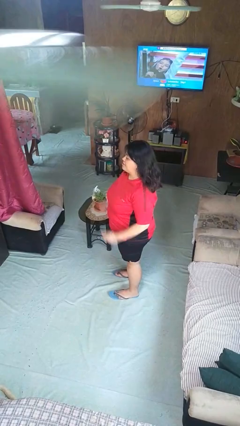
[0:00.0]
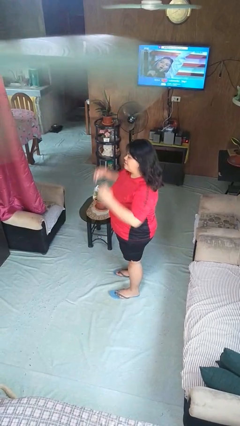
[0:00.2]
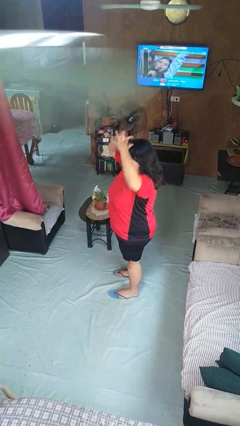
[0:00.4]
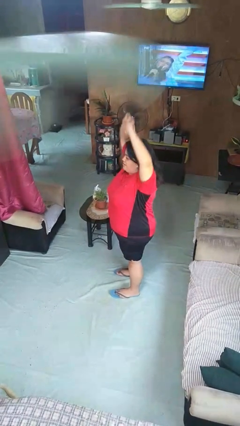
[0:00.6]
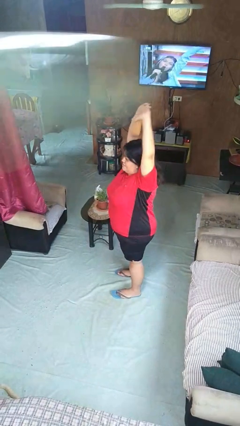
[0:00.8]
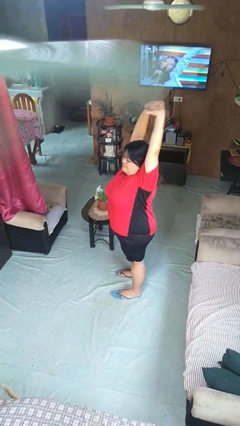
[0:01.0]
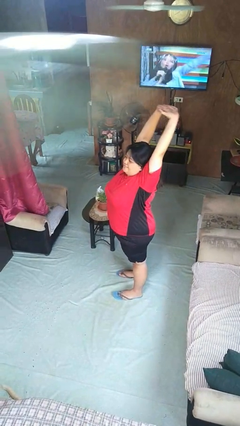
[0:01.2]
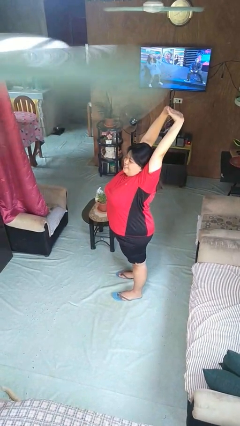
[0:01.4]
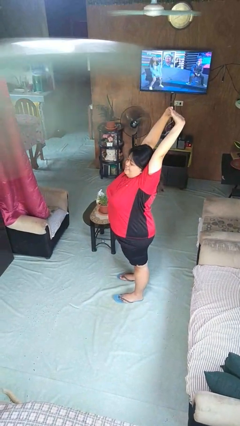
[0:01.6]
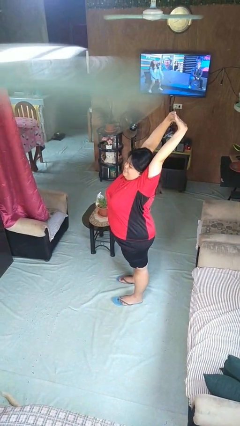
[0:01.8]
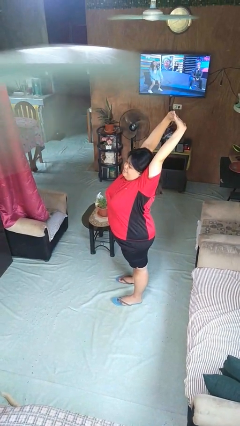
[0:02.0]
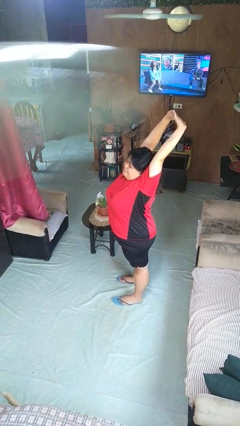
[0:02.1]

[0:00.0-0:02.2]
person stretches arms over head

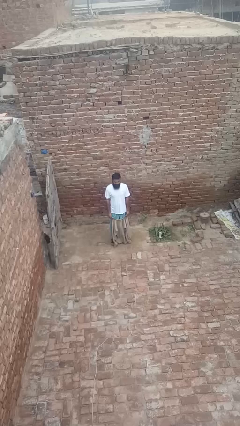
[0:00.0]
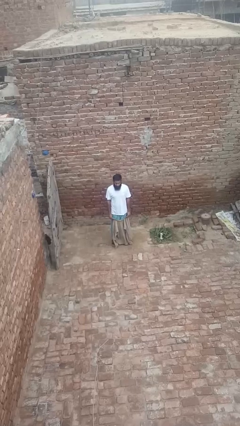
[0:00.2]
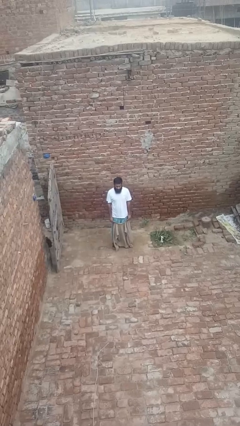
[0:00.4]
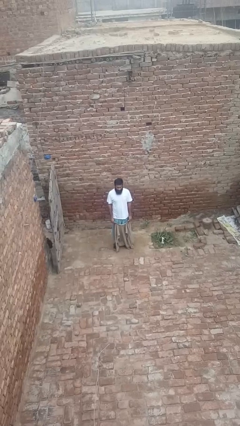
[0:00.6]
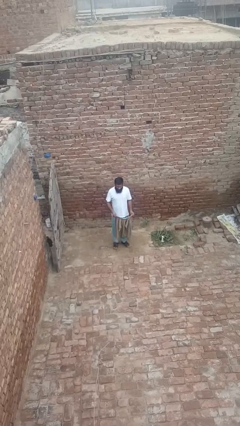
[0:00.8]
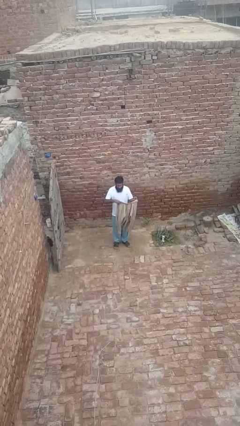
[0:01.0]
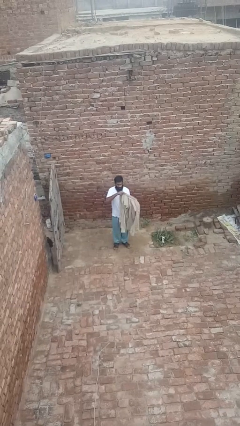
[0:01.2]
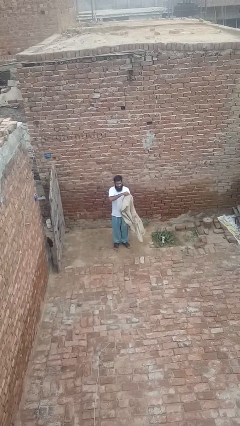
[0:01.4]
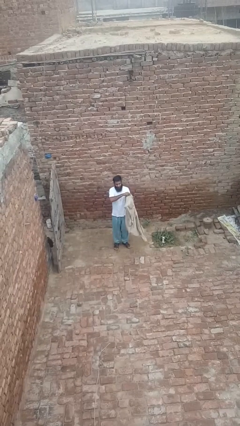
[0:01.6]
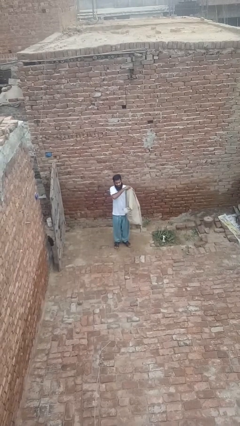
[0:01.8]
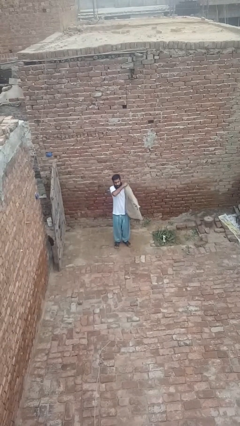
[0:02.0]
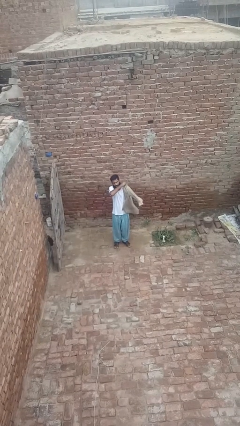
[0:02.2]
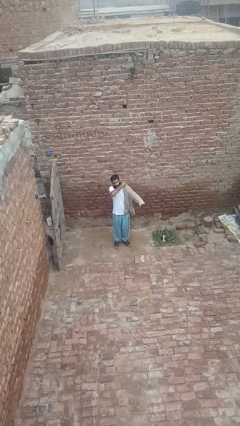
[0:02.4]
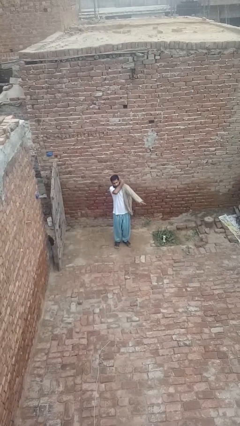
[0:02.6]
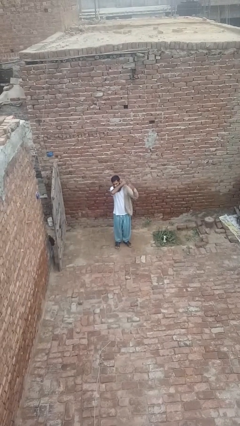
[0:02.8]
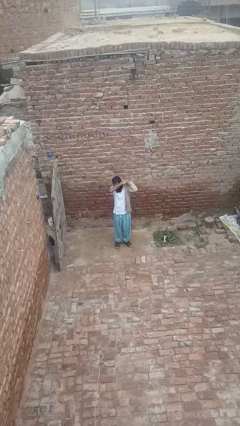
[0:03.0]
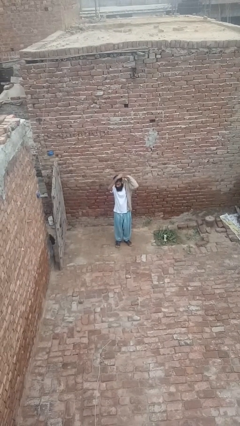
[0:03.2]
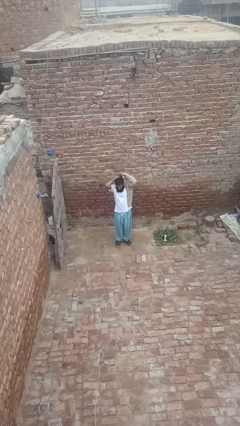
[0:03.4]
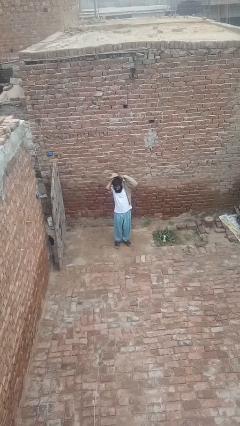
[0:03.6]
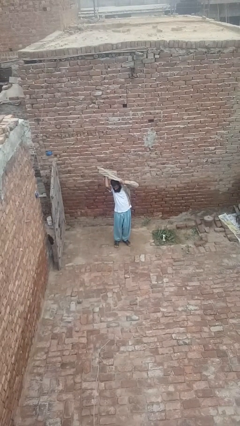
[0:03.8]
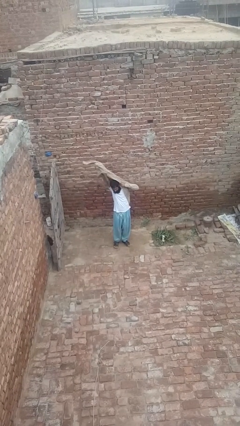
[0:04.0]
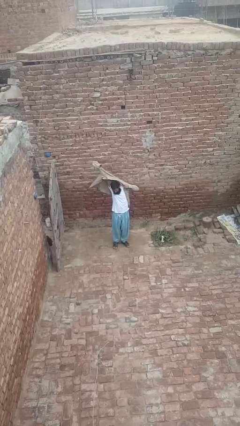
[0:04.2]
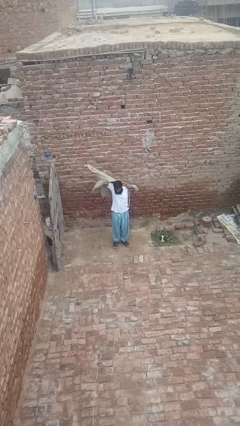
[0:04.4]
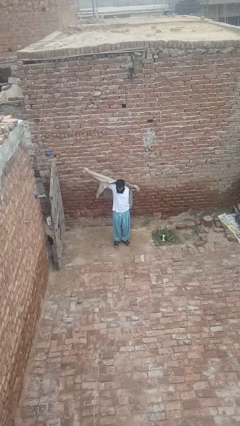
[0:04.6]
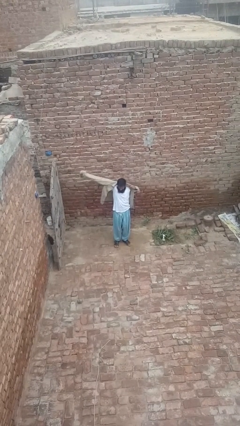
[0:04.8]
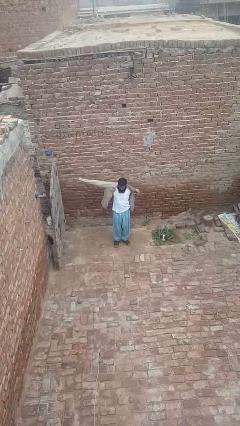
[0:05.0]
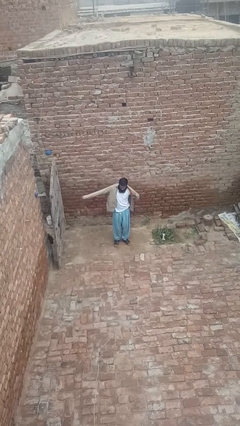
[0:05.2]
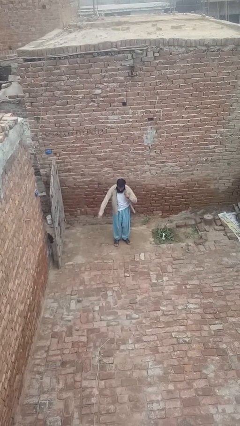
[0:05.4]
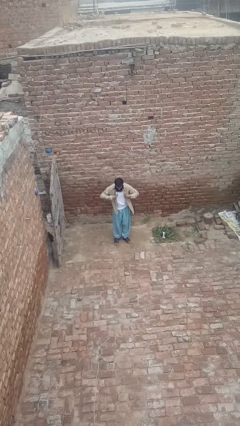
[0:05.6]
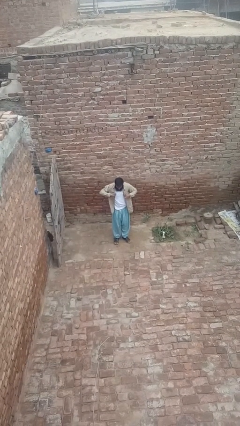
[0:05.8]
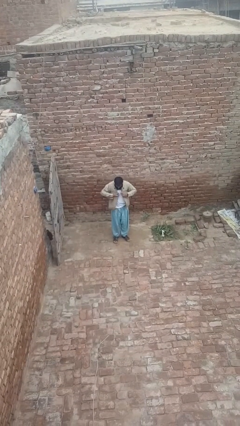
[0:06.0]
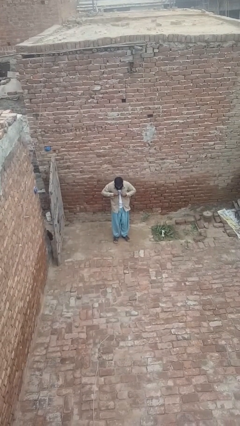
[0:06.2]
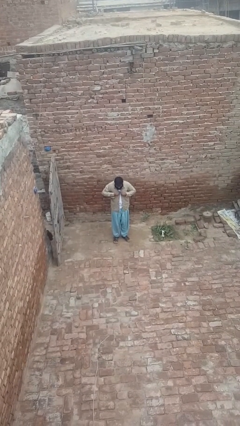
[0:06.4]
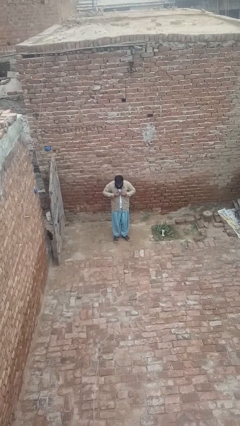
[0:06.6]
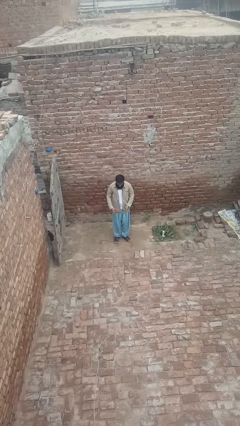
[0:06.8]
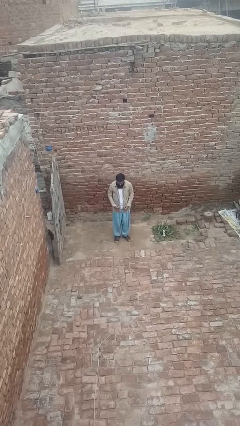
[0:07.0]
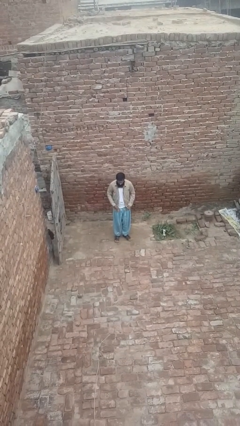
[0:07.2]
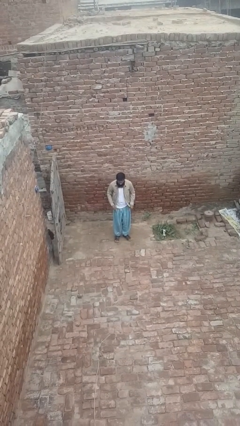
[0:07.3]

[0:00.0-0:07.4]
person puts on shirt

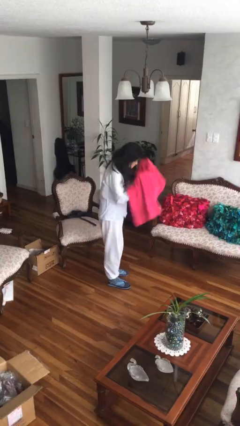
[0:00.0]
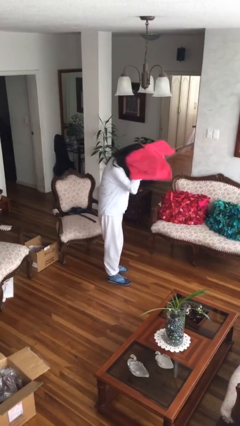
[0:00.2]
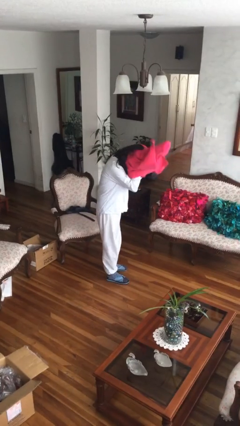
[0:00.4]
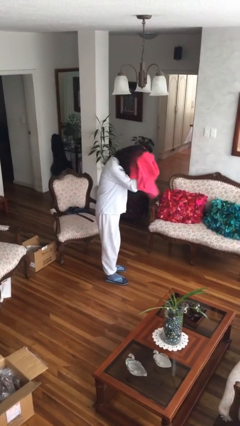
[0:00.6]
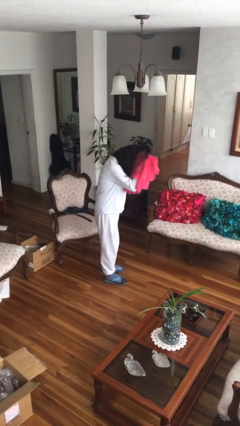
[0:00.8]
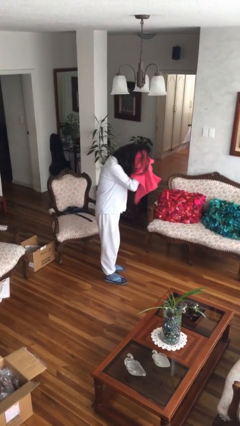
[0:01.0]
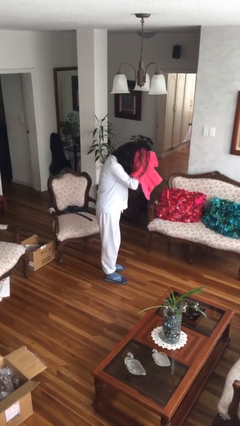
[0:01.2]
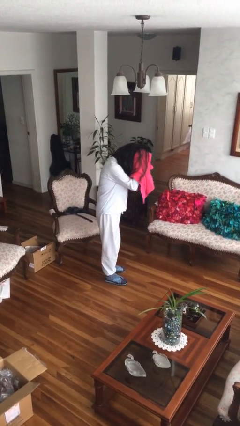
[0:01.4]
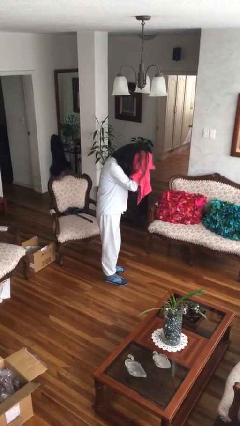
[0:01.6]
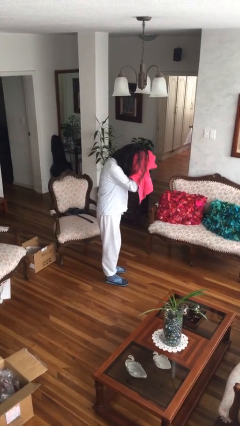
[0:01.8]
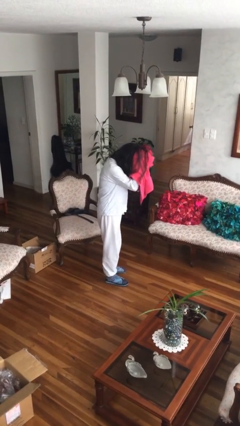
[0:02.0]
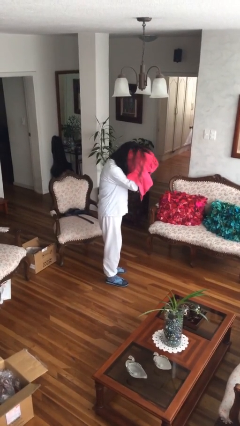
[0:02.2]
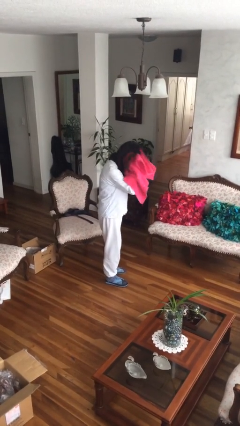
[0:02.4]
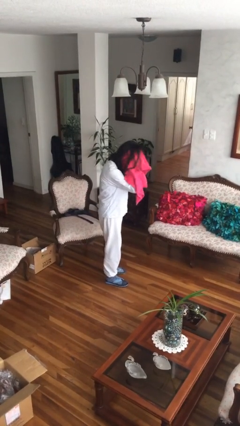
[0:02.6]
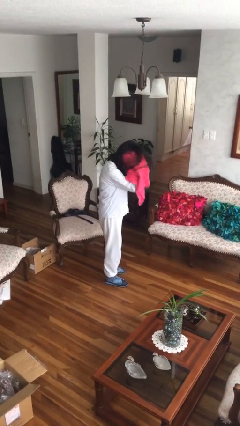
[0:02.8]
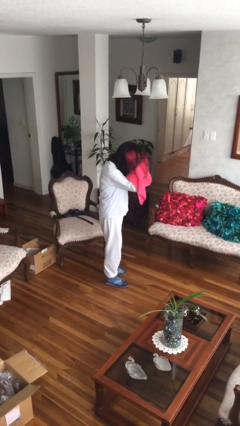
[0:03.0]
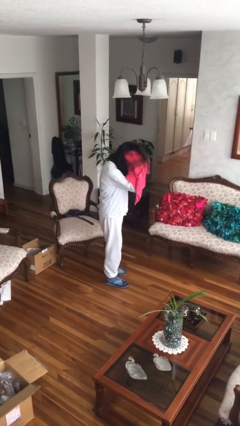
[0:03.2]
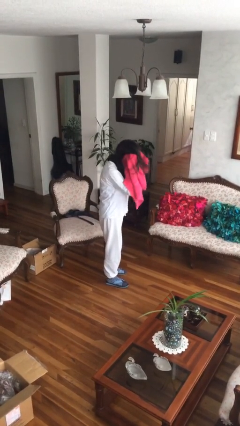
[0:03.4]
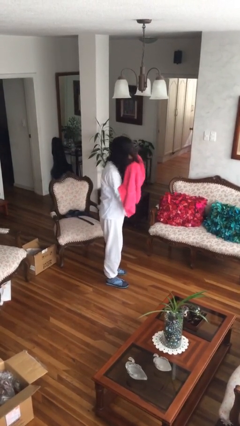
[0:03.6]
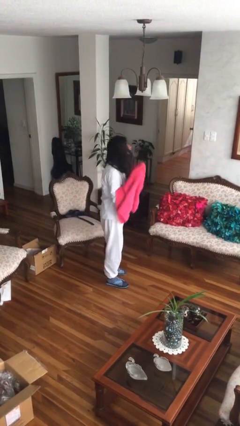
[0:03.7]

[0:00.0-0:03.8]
person dries hair with towel

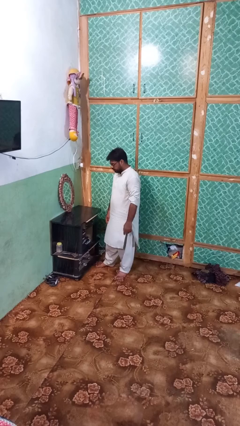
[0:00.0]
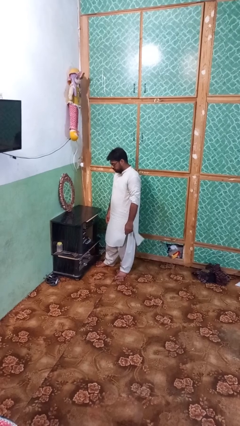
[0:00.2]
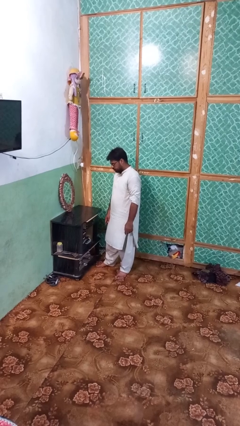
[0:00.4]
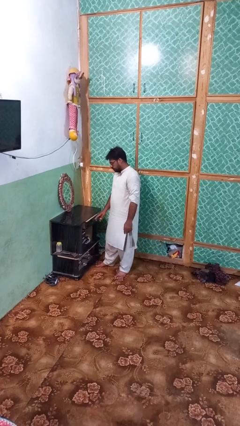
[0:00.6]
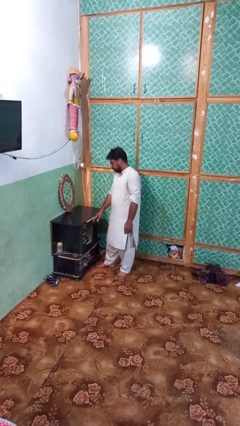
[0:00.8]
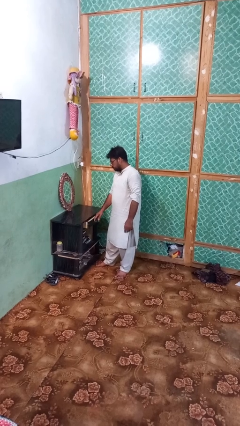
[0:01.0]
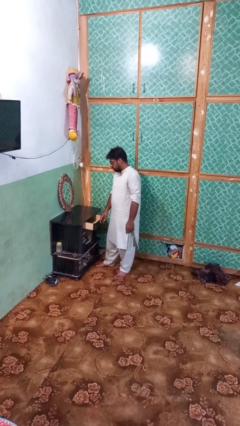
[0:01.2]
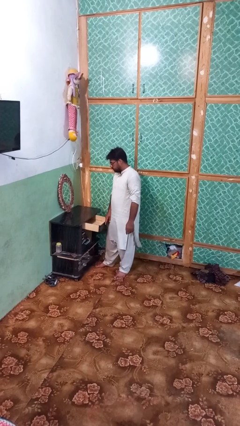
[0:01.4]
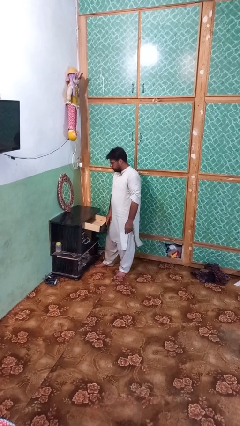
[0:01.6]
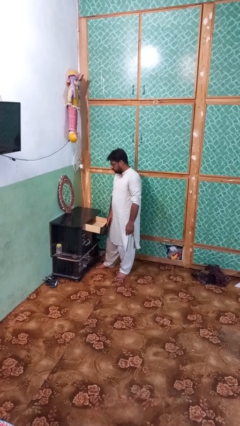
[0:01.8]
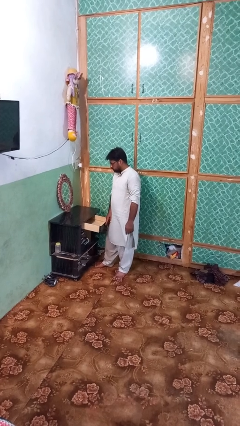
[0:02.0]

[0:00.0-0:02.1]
person opens dresser drawer

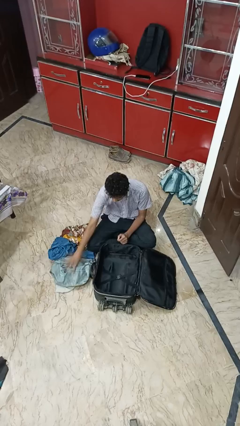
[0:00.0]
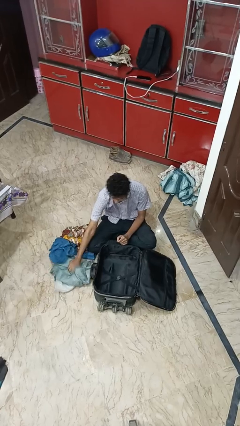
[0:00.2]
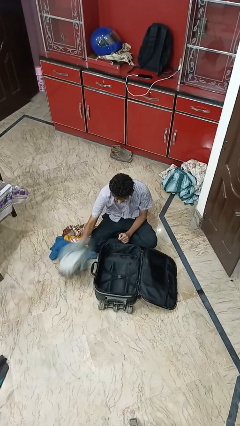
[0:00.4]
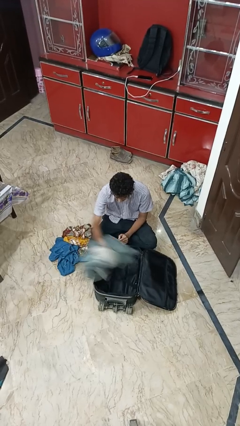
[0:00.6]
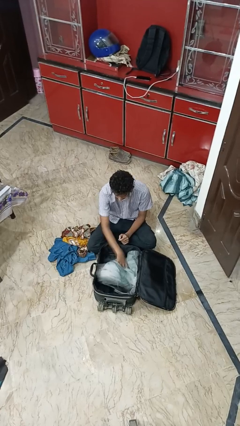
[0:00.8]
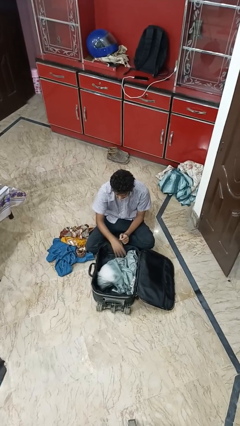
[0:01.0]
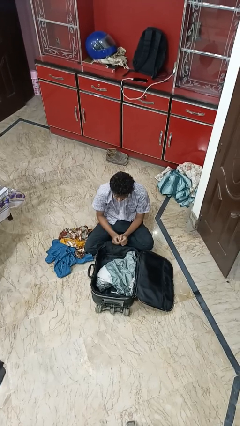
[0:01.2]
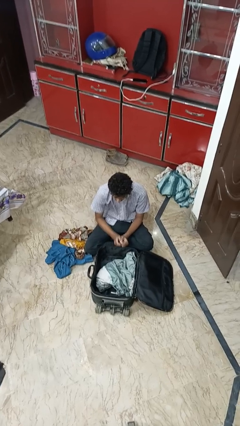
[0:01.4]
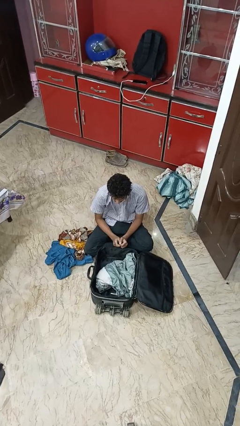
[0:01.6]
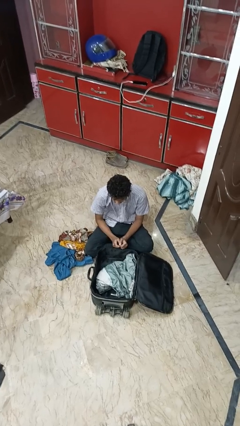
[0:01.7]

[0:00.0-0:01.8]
person loads clothes into suitcase

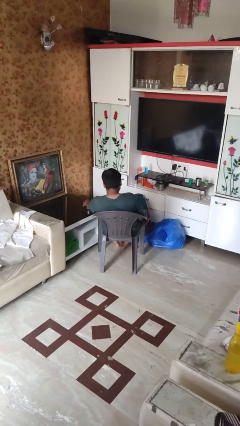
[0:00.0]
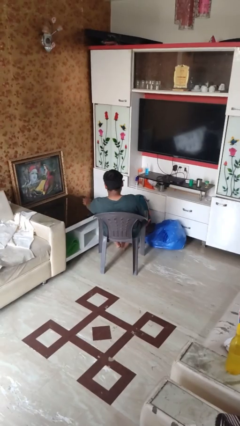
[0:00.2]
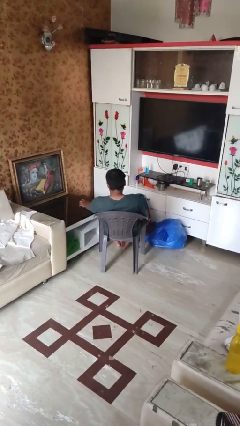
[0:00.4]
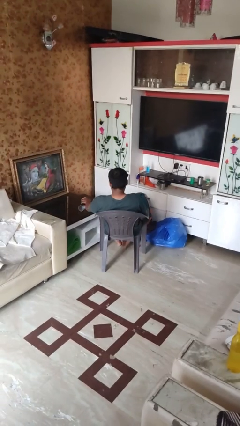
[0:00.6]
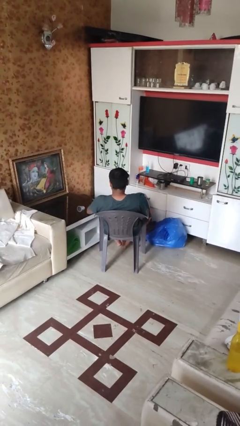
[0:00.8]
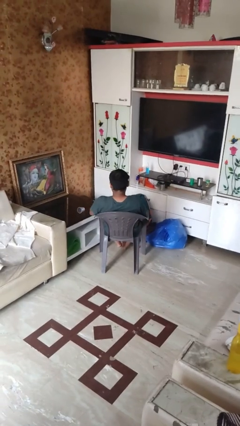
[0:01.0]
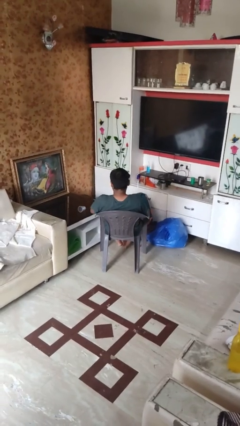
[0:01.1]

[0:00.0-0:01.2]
person knocks over glass
